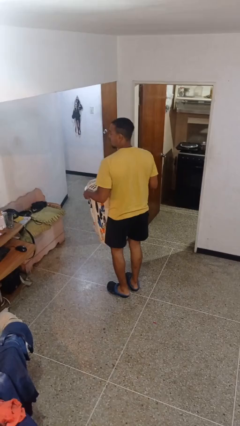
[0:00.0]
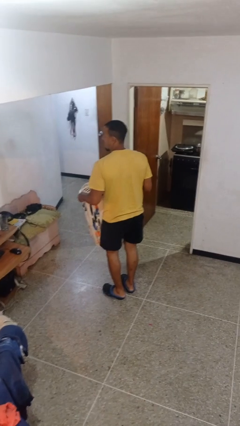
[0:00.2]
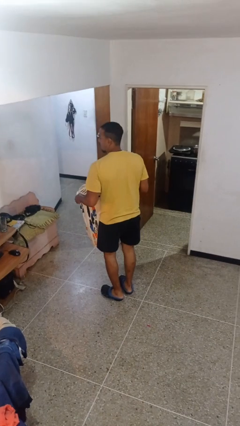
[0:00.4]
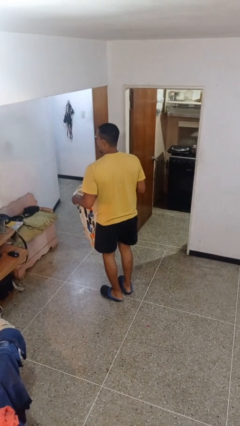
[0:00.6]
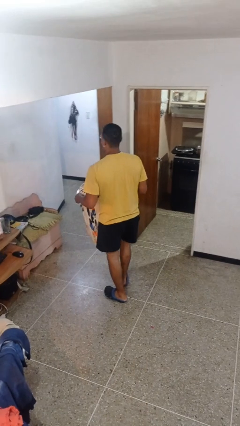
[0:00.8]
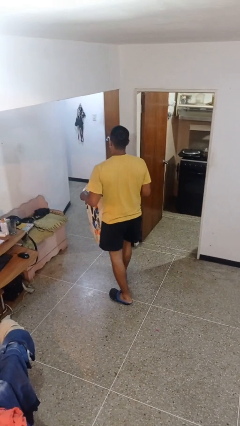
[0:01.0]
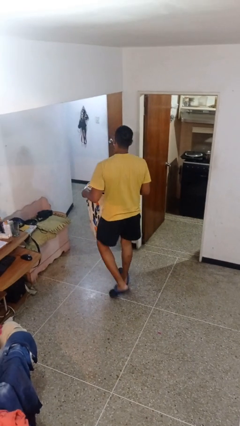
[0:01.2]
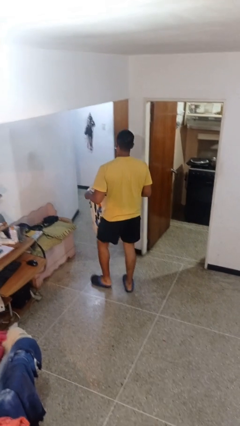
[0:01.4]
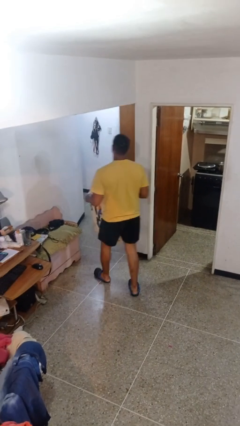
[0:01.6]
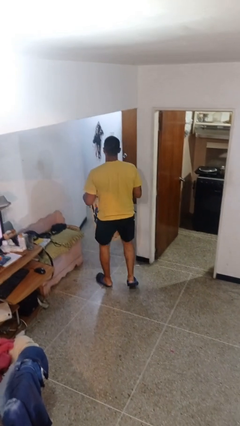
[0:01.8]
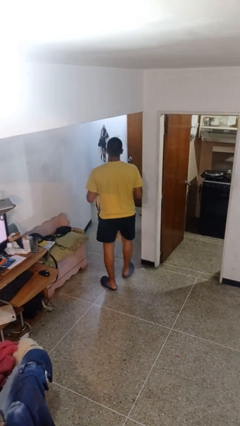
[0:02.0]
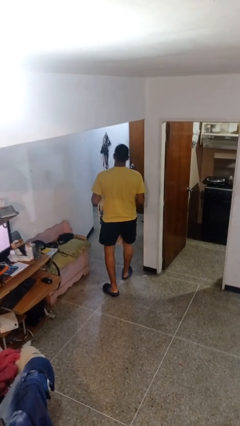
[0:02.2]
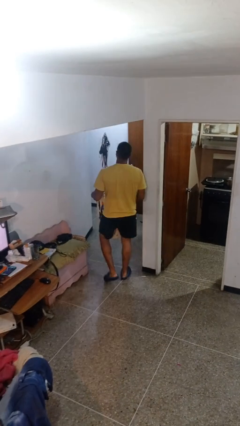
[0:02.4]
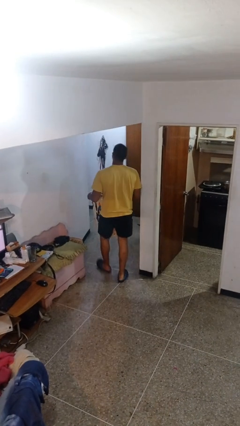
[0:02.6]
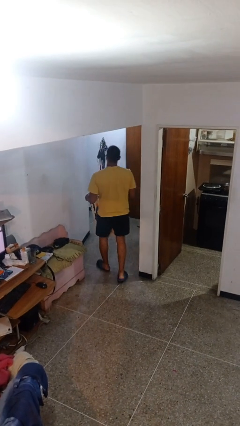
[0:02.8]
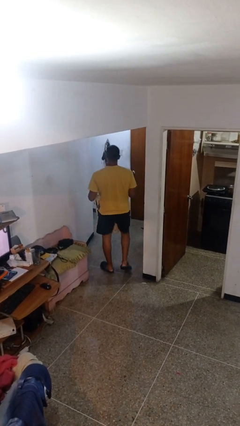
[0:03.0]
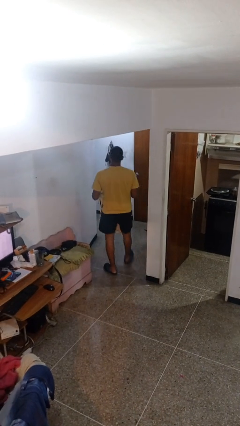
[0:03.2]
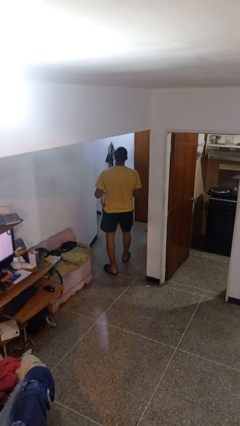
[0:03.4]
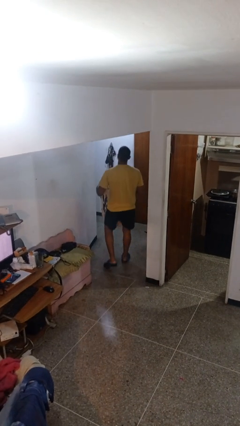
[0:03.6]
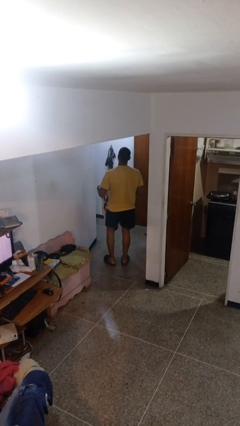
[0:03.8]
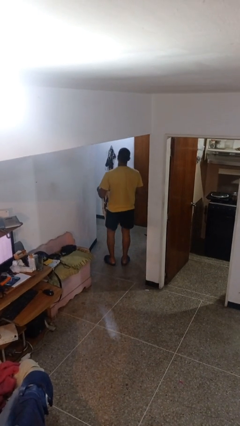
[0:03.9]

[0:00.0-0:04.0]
person carries laundry basket

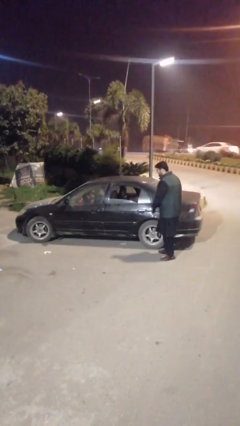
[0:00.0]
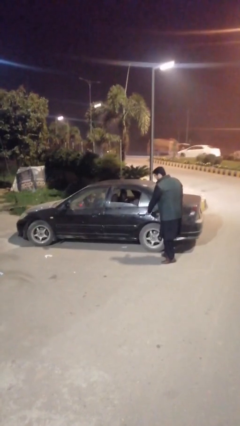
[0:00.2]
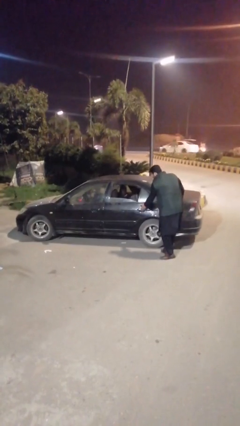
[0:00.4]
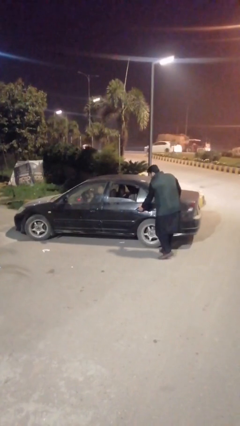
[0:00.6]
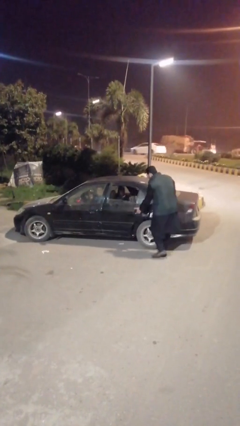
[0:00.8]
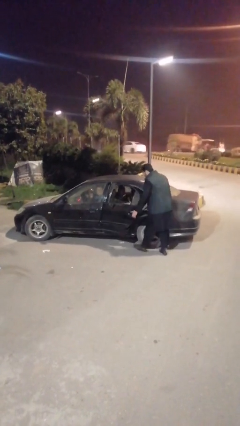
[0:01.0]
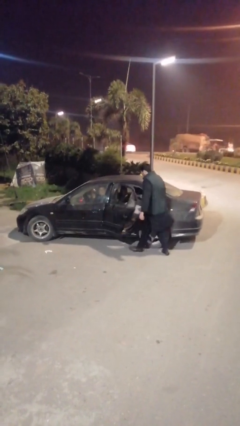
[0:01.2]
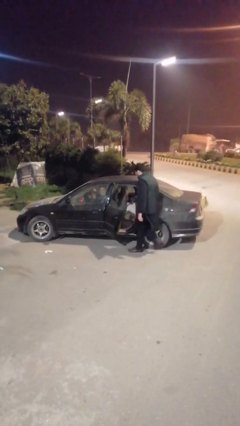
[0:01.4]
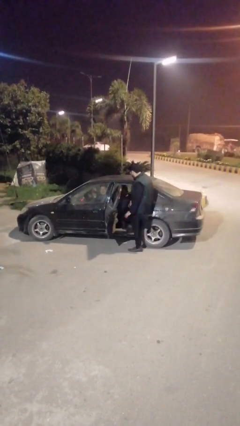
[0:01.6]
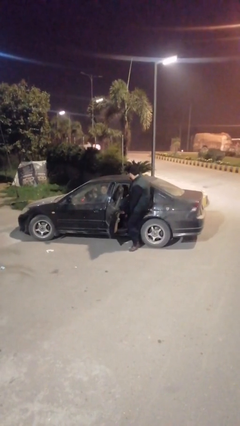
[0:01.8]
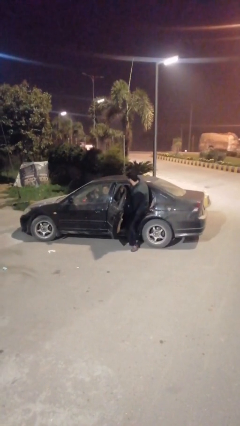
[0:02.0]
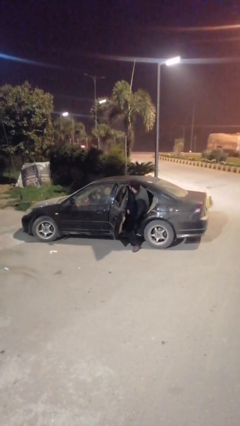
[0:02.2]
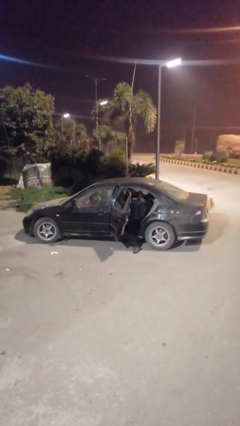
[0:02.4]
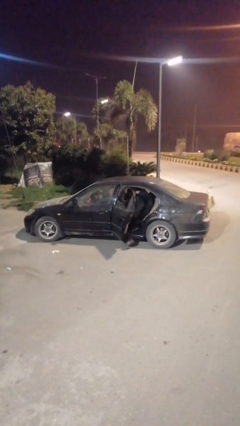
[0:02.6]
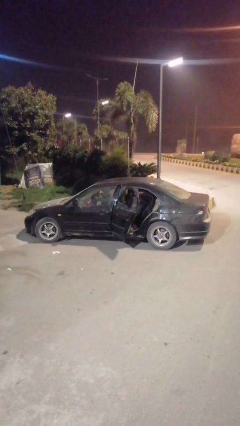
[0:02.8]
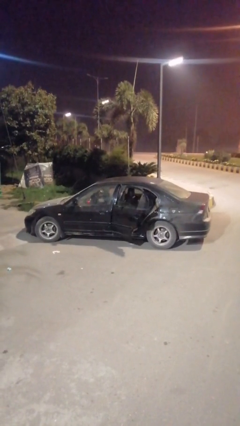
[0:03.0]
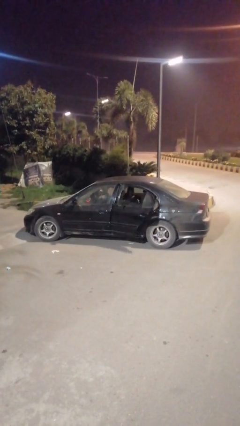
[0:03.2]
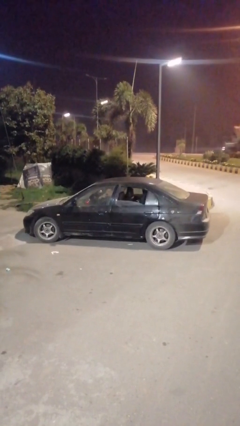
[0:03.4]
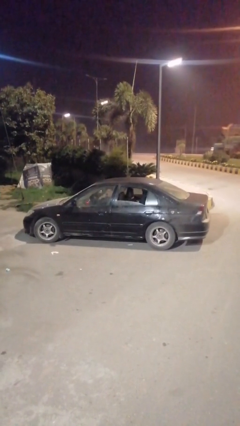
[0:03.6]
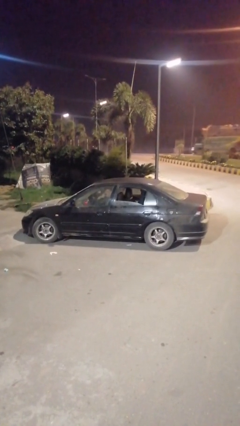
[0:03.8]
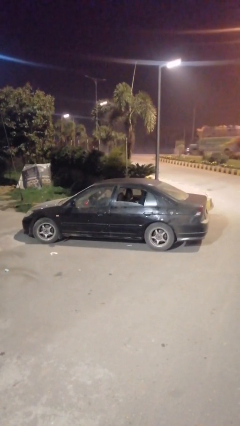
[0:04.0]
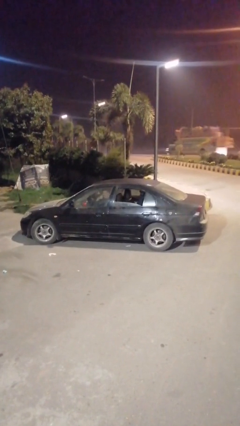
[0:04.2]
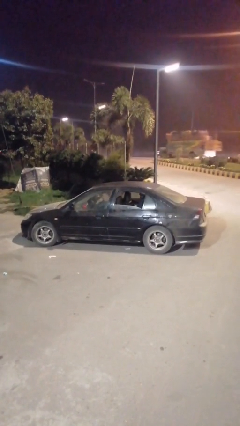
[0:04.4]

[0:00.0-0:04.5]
car picks up person

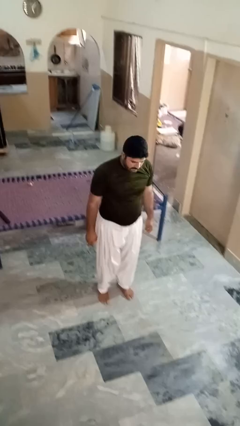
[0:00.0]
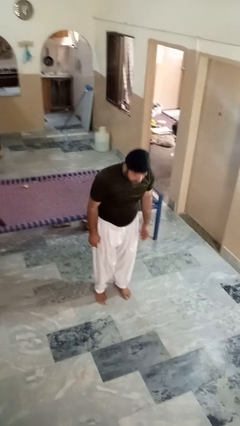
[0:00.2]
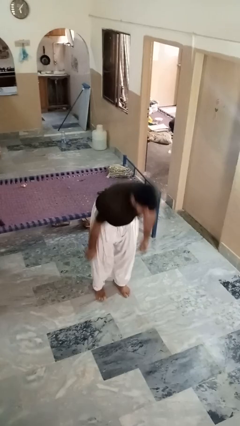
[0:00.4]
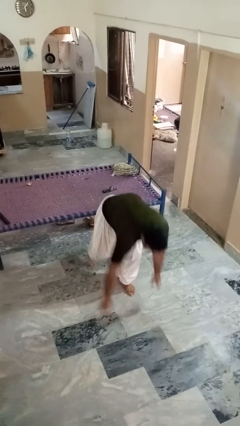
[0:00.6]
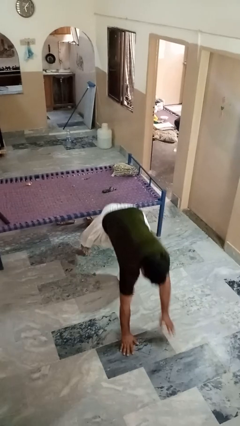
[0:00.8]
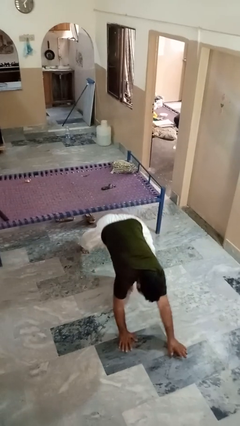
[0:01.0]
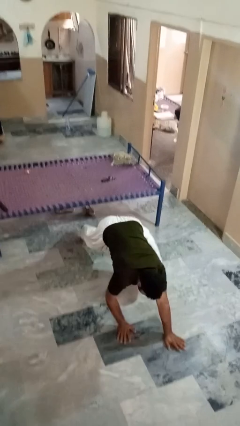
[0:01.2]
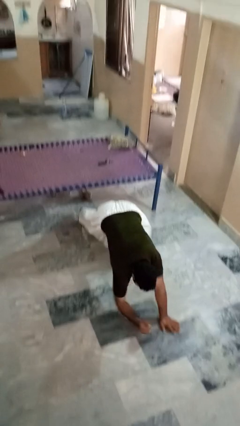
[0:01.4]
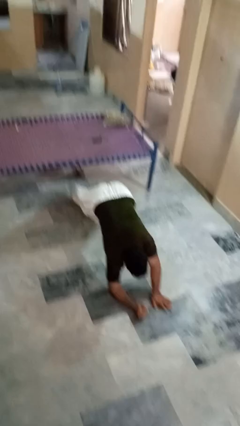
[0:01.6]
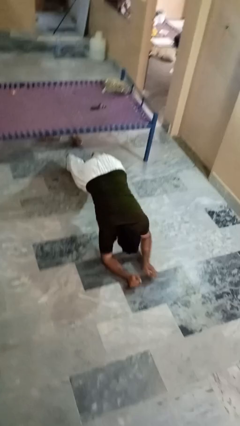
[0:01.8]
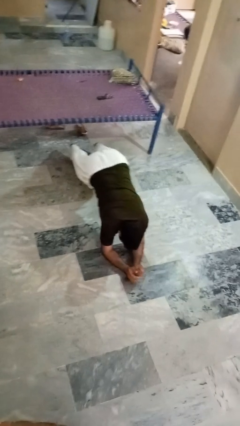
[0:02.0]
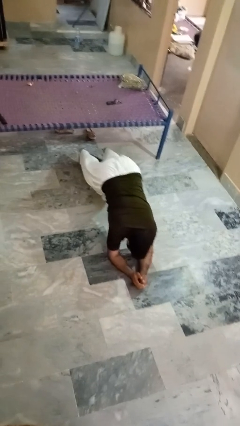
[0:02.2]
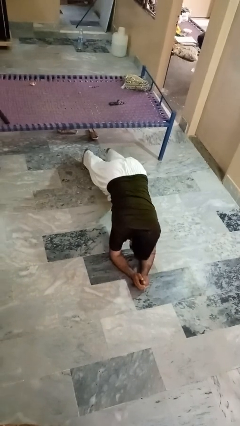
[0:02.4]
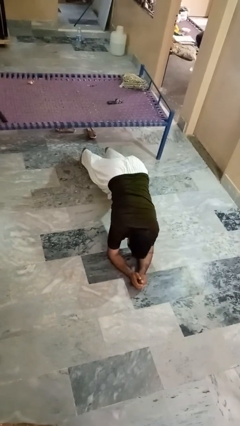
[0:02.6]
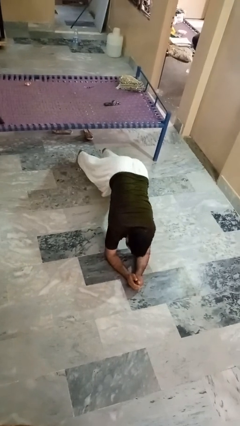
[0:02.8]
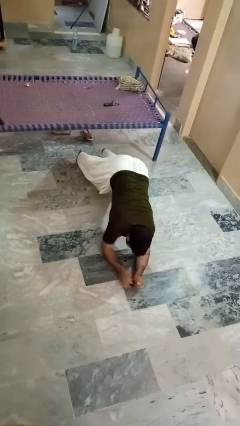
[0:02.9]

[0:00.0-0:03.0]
person exercises with plank

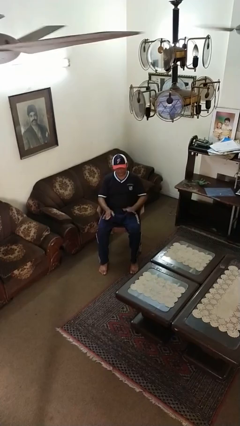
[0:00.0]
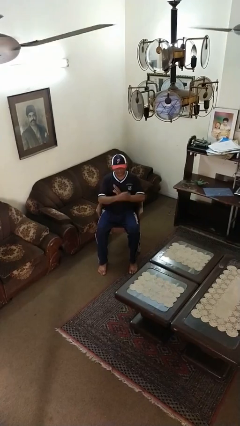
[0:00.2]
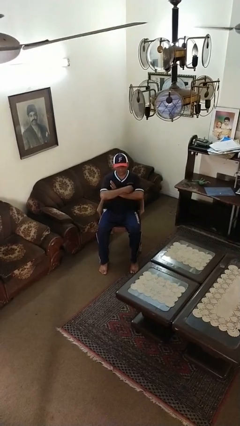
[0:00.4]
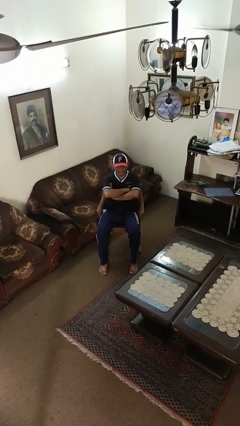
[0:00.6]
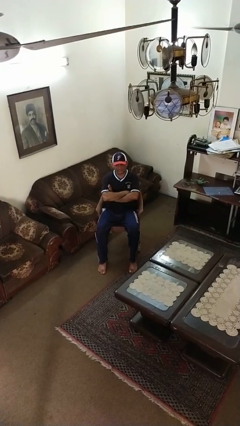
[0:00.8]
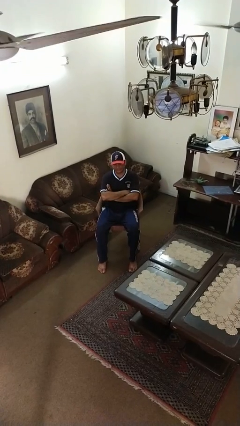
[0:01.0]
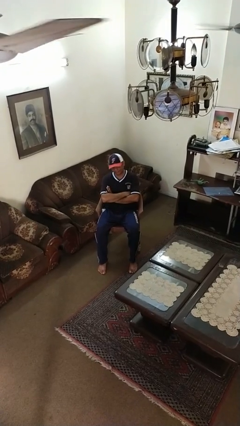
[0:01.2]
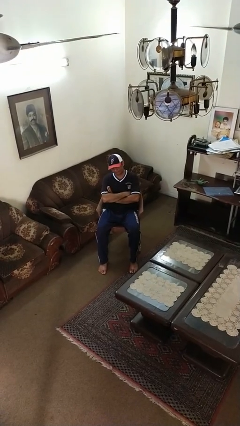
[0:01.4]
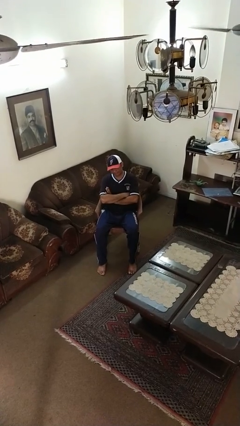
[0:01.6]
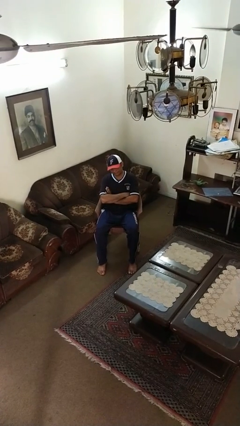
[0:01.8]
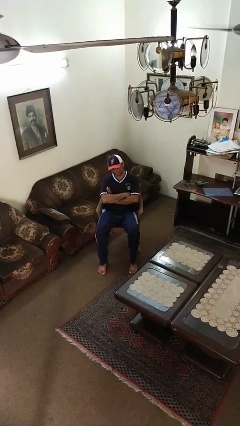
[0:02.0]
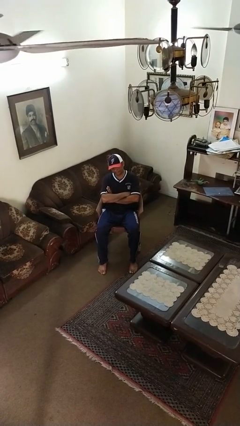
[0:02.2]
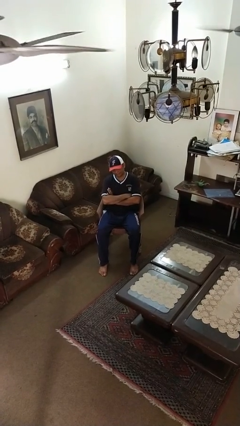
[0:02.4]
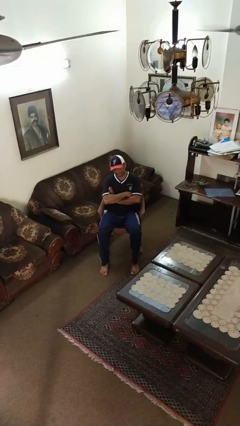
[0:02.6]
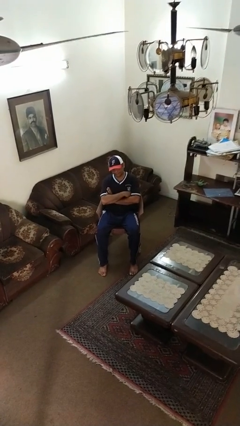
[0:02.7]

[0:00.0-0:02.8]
person crosses arms

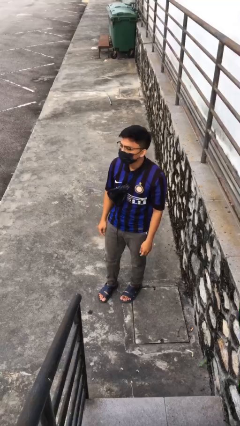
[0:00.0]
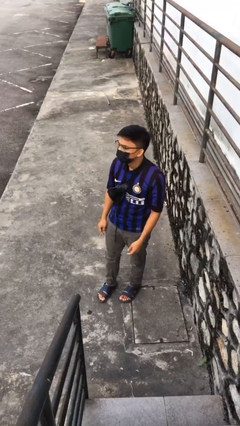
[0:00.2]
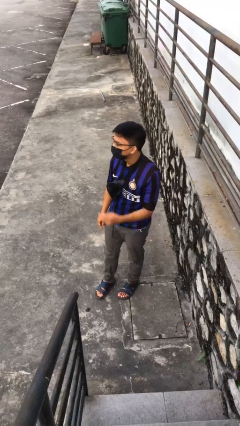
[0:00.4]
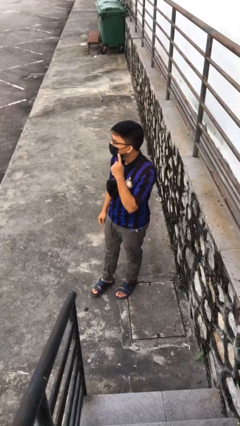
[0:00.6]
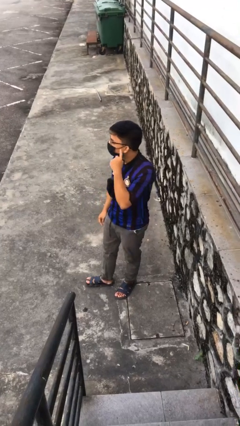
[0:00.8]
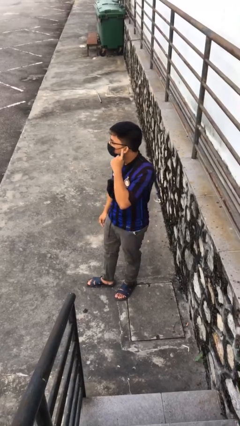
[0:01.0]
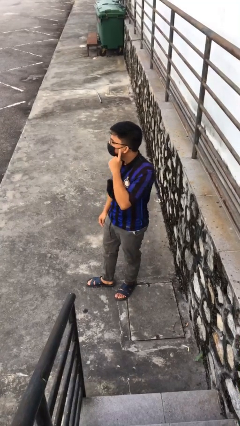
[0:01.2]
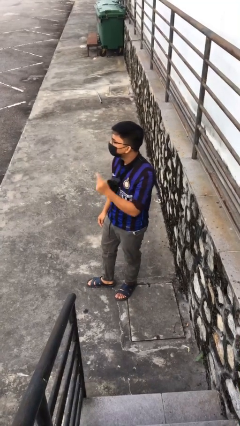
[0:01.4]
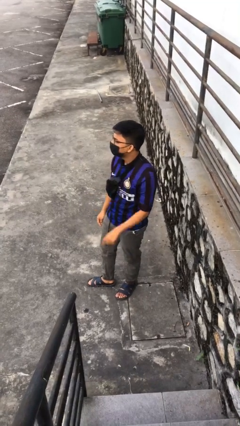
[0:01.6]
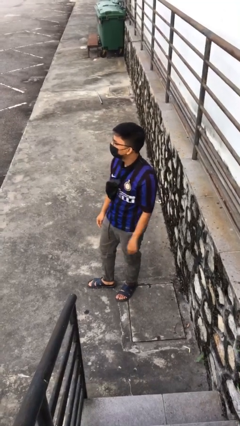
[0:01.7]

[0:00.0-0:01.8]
person gestures listen closely

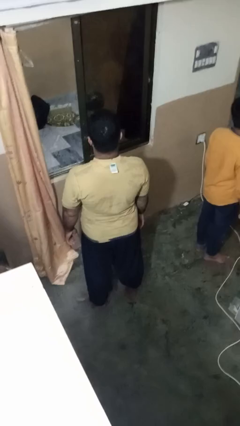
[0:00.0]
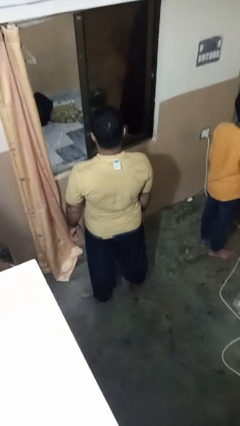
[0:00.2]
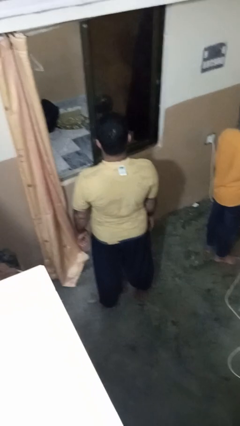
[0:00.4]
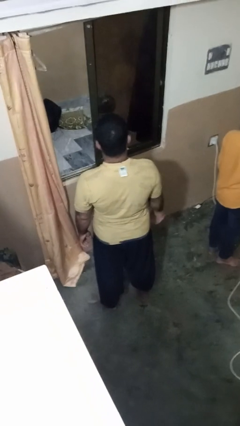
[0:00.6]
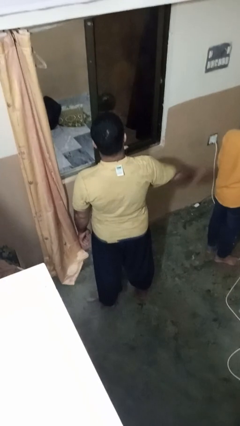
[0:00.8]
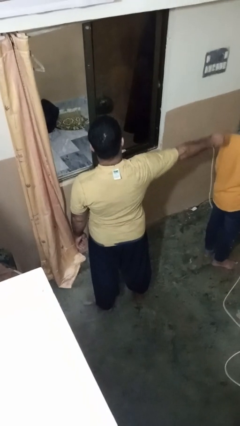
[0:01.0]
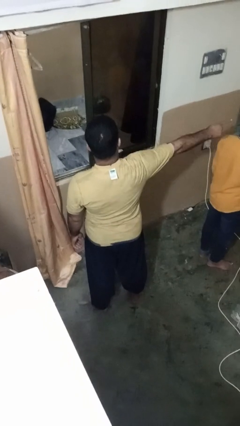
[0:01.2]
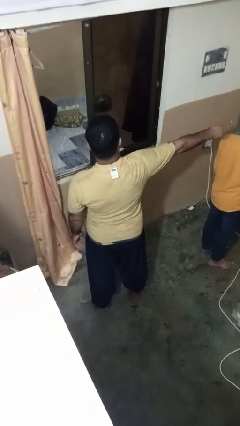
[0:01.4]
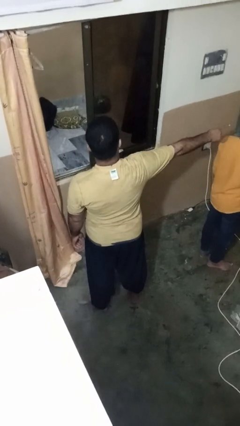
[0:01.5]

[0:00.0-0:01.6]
person points at person
